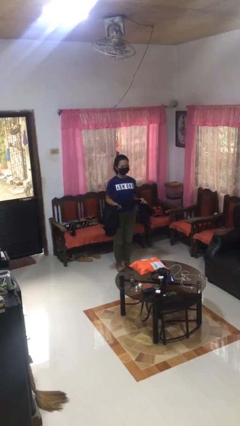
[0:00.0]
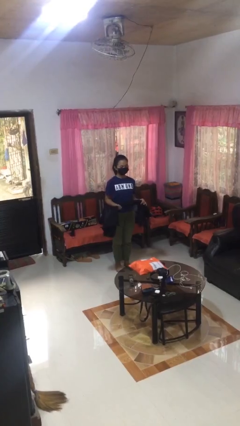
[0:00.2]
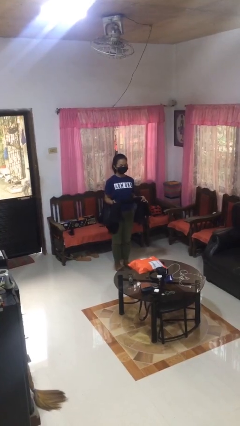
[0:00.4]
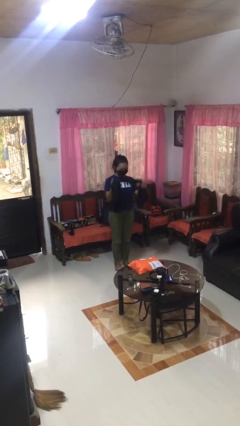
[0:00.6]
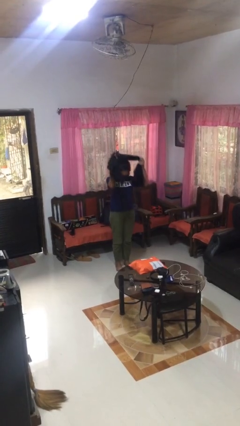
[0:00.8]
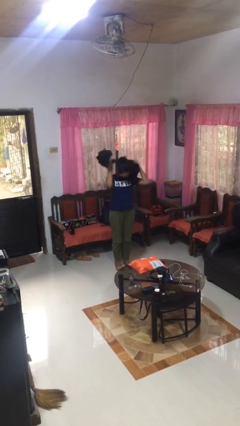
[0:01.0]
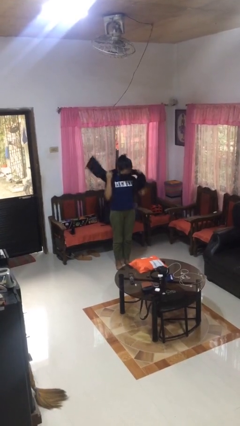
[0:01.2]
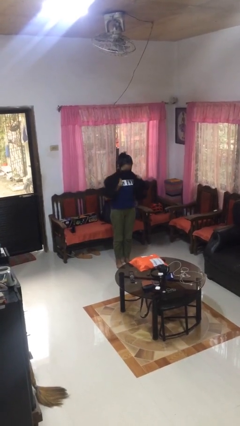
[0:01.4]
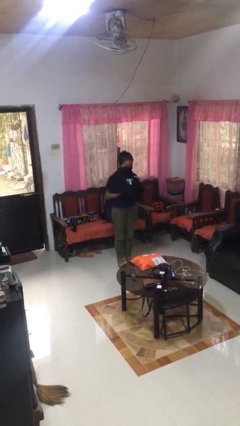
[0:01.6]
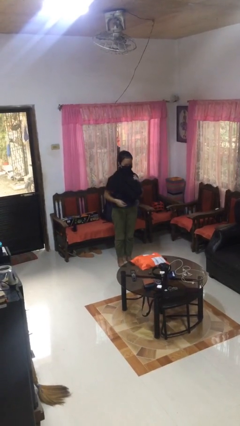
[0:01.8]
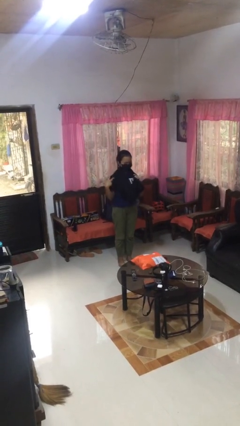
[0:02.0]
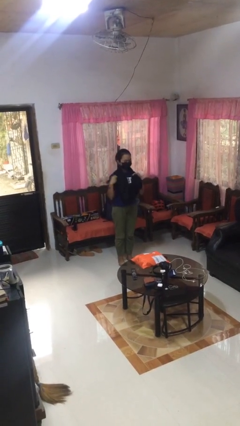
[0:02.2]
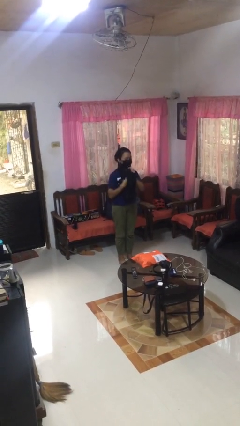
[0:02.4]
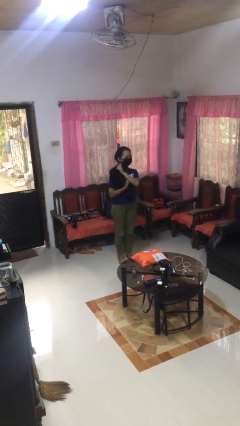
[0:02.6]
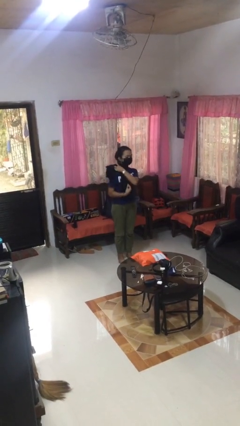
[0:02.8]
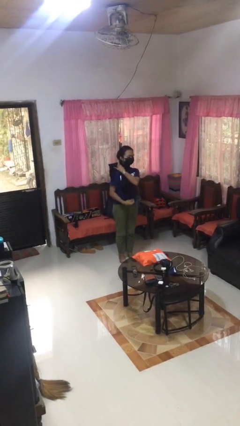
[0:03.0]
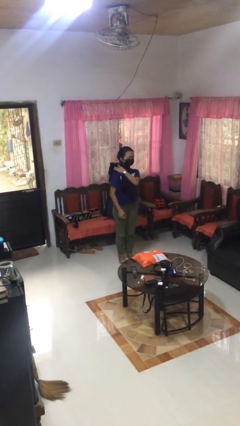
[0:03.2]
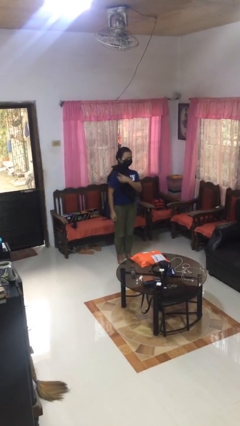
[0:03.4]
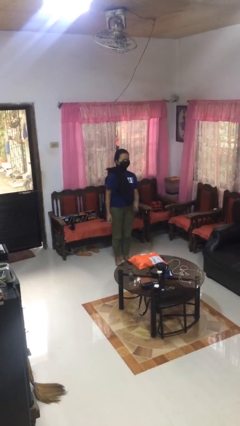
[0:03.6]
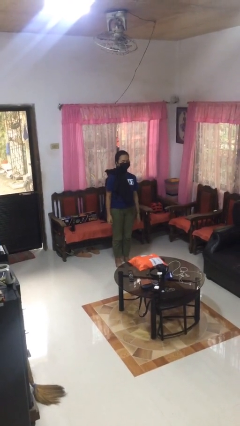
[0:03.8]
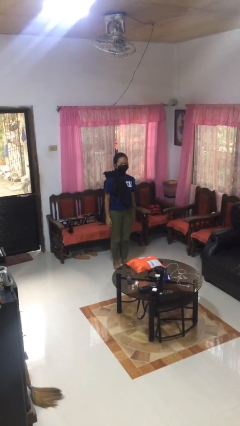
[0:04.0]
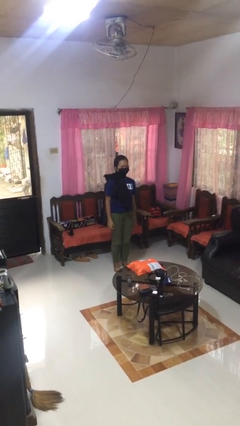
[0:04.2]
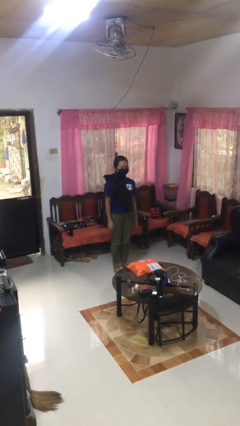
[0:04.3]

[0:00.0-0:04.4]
person puts on scarf

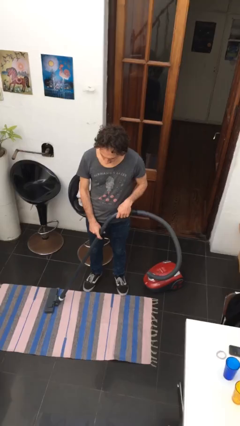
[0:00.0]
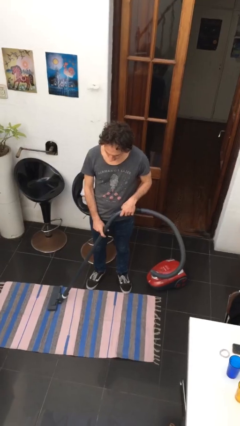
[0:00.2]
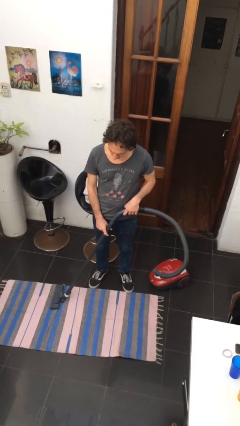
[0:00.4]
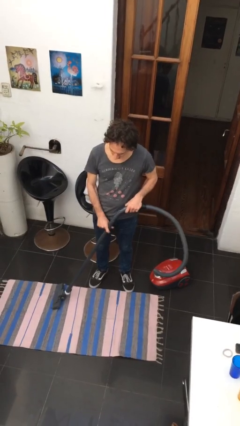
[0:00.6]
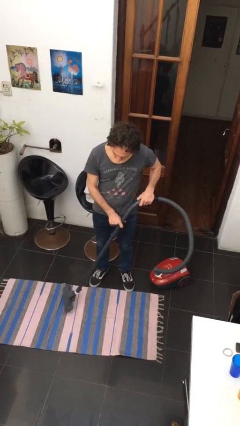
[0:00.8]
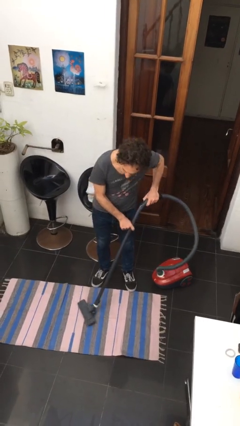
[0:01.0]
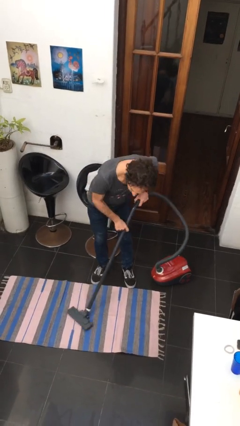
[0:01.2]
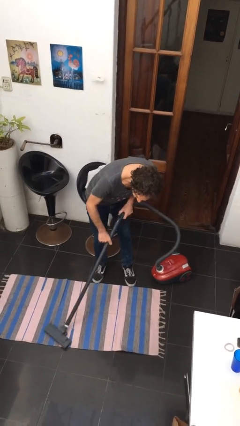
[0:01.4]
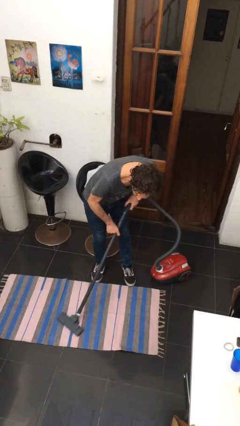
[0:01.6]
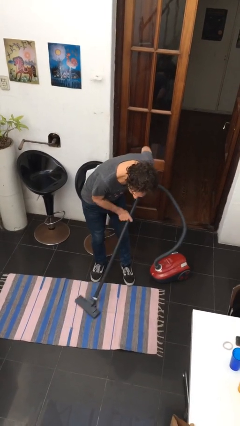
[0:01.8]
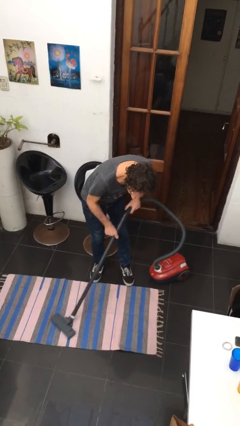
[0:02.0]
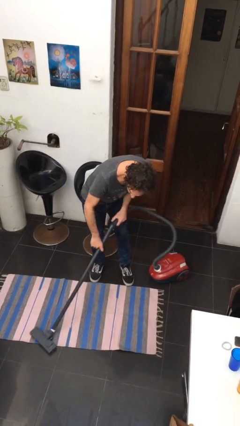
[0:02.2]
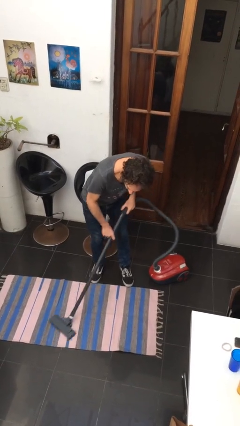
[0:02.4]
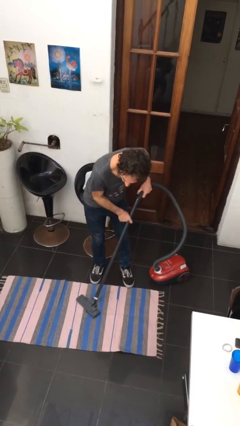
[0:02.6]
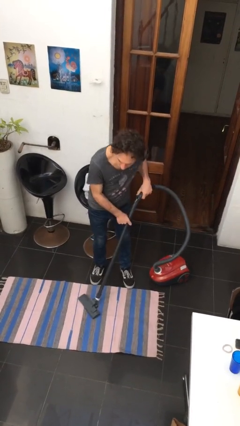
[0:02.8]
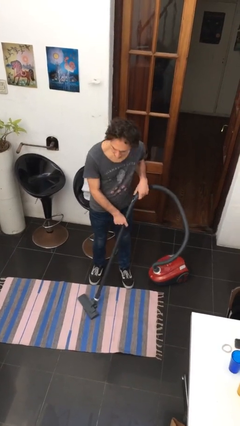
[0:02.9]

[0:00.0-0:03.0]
person vacuums carpet

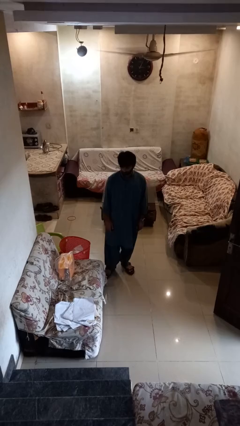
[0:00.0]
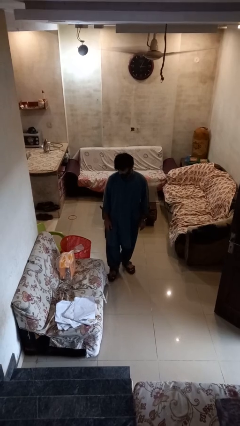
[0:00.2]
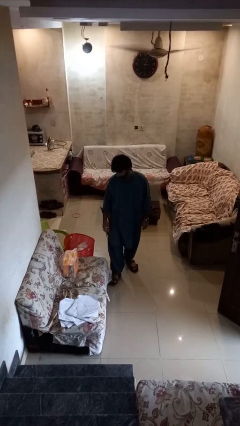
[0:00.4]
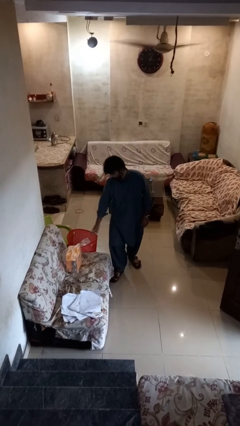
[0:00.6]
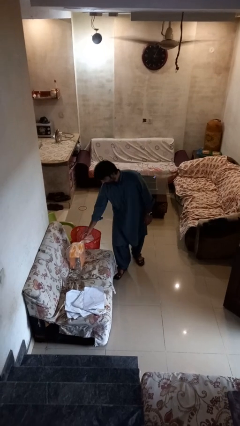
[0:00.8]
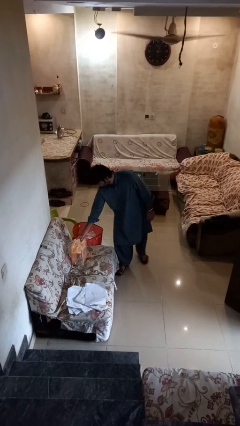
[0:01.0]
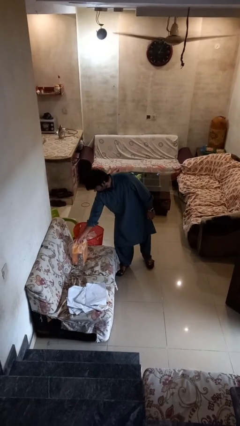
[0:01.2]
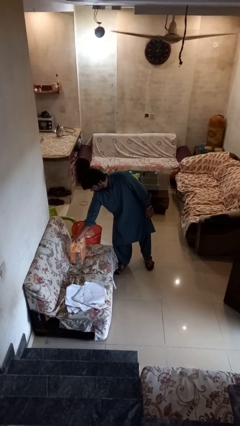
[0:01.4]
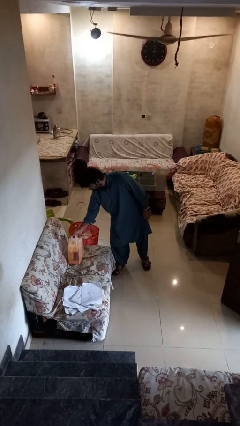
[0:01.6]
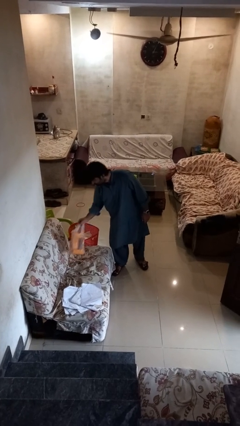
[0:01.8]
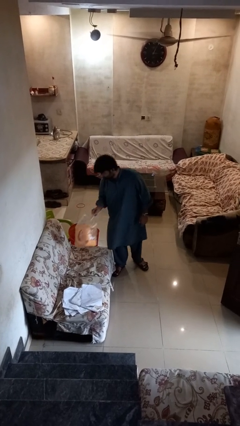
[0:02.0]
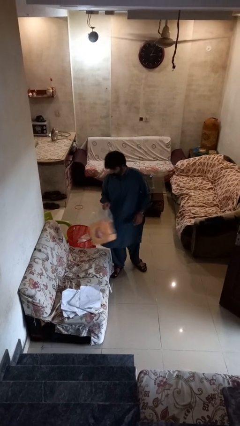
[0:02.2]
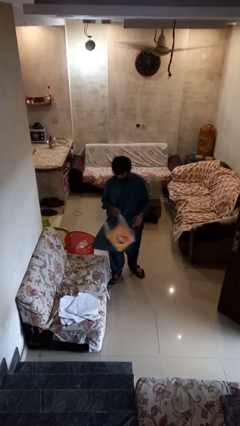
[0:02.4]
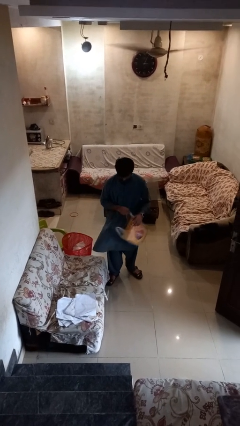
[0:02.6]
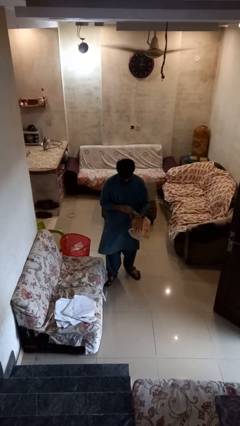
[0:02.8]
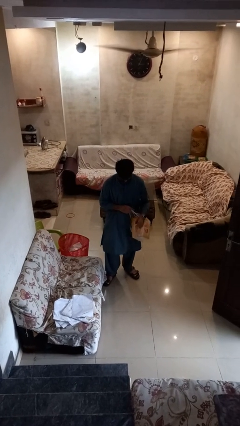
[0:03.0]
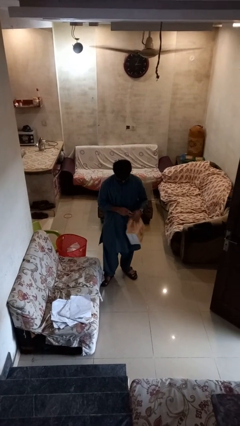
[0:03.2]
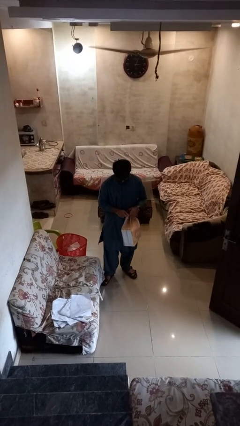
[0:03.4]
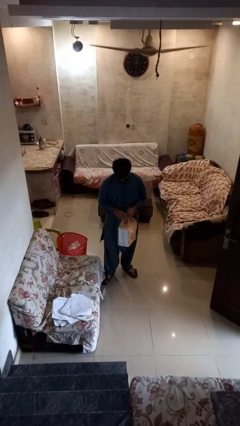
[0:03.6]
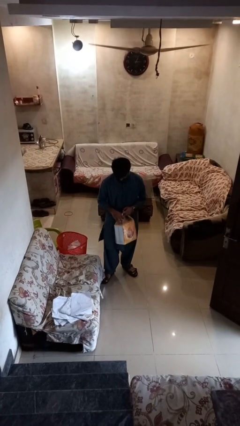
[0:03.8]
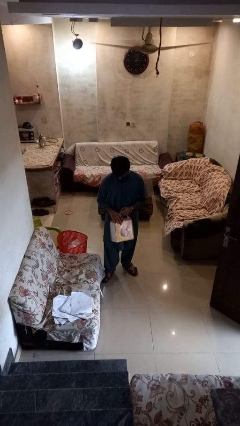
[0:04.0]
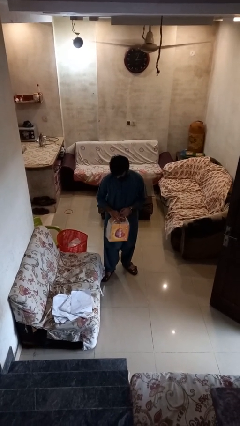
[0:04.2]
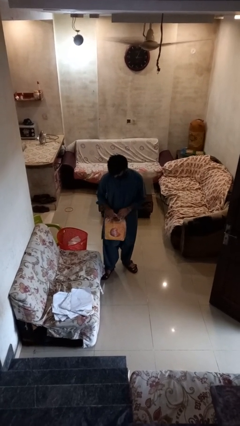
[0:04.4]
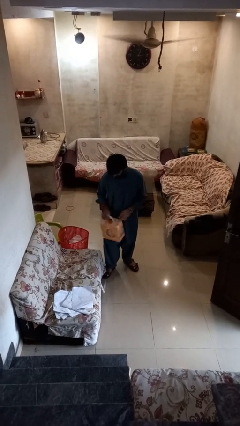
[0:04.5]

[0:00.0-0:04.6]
person picks up object from couch

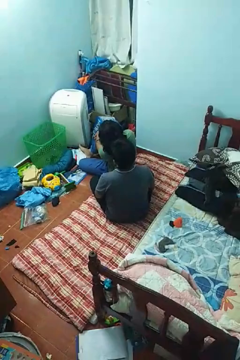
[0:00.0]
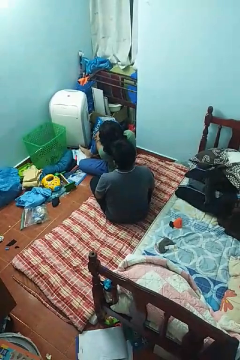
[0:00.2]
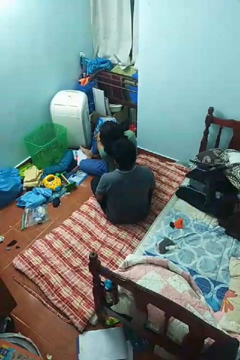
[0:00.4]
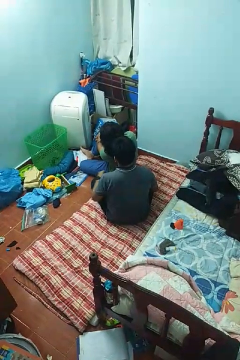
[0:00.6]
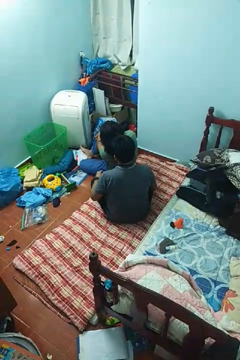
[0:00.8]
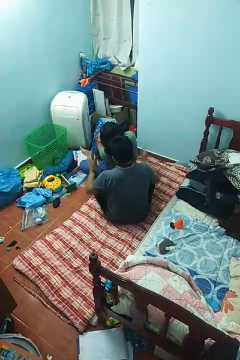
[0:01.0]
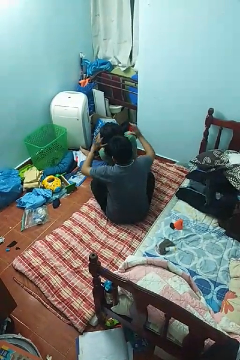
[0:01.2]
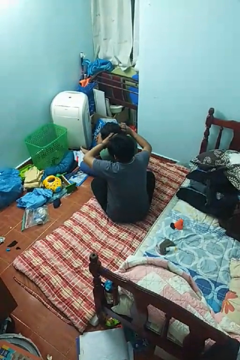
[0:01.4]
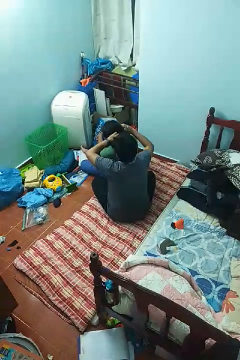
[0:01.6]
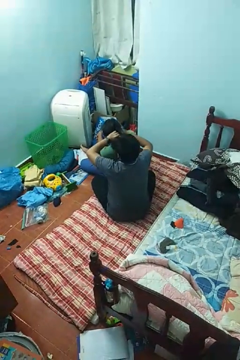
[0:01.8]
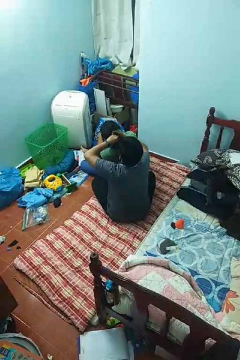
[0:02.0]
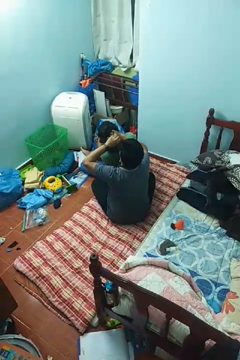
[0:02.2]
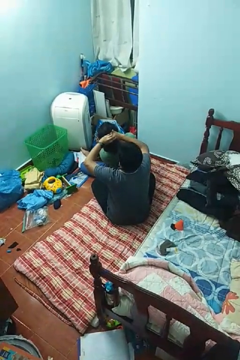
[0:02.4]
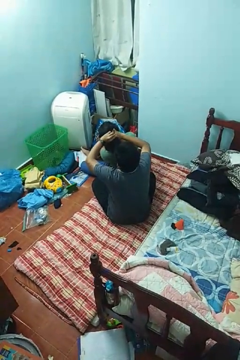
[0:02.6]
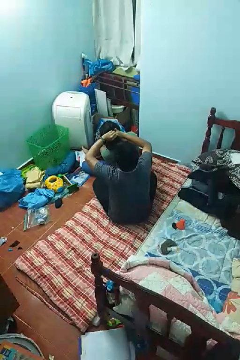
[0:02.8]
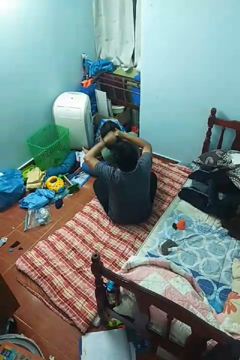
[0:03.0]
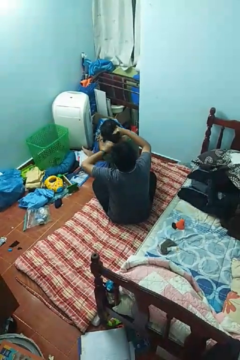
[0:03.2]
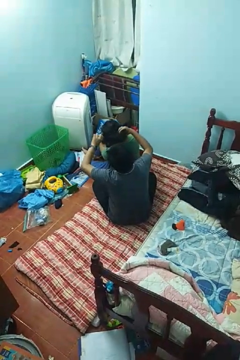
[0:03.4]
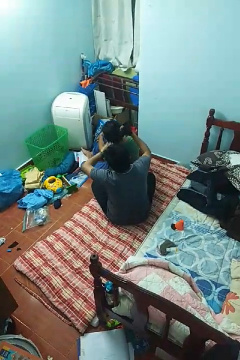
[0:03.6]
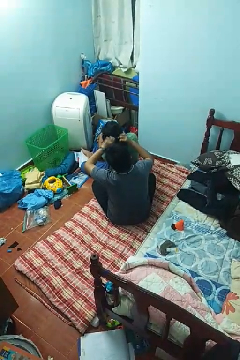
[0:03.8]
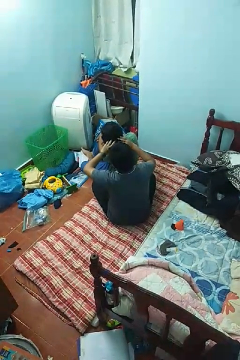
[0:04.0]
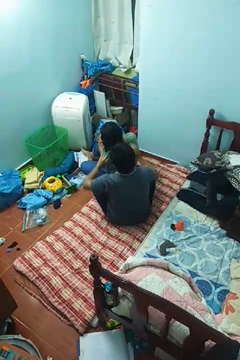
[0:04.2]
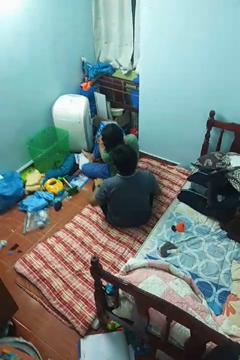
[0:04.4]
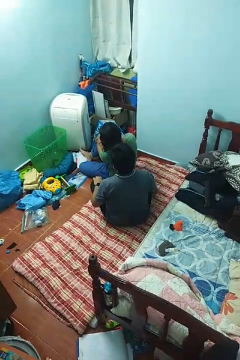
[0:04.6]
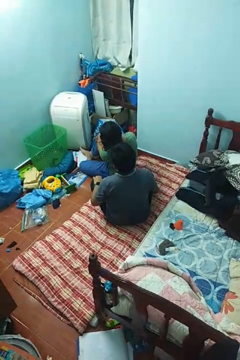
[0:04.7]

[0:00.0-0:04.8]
person braids hair of person

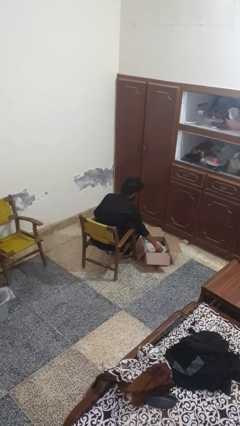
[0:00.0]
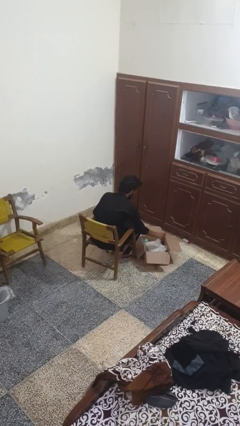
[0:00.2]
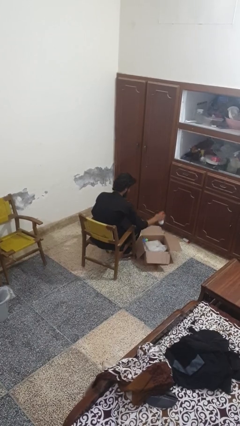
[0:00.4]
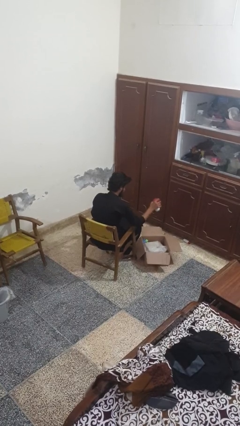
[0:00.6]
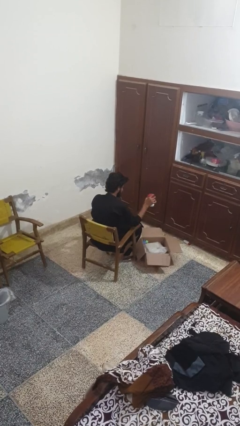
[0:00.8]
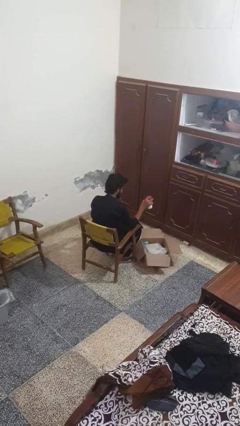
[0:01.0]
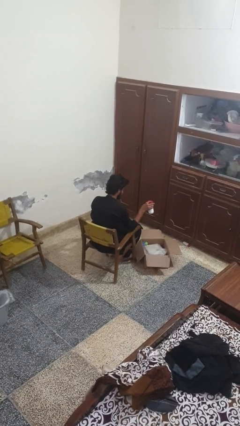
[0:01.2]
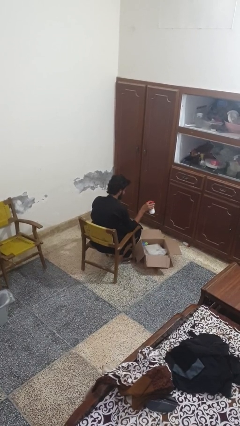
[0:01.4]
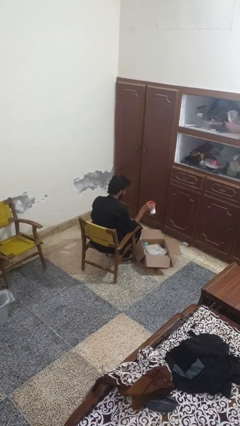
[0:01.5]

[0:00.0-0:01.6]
person takes object from box
